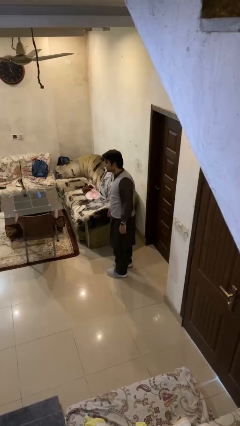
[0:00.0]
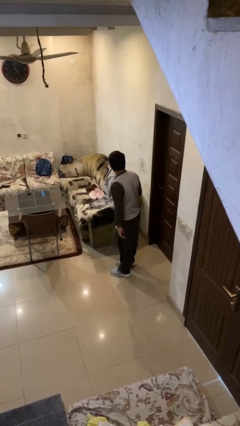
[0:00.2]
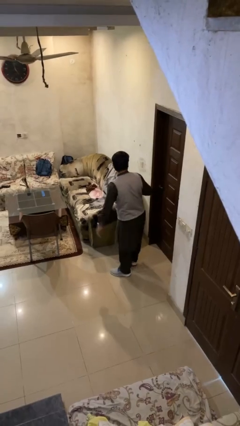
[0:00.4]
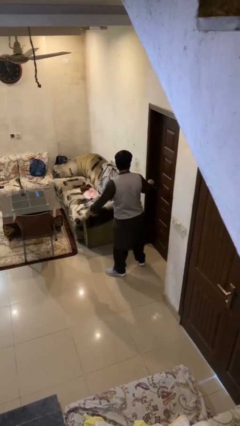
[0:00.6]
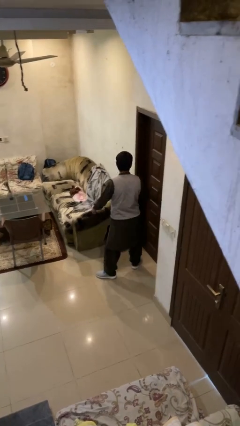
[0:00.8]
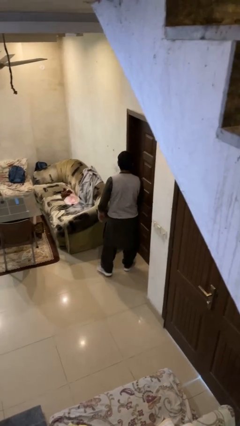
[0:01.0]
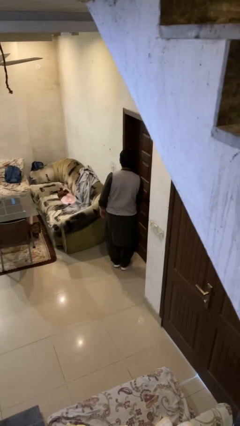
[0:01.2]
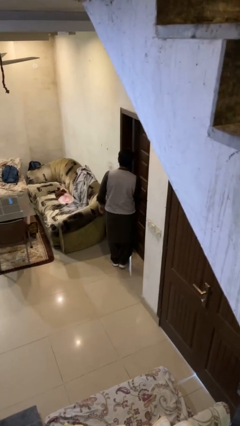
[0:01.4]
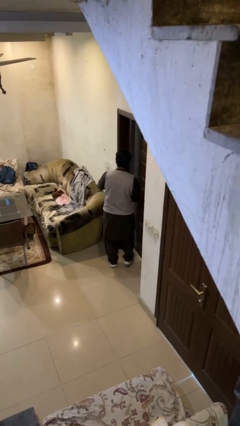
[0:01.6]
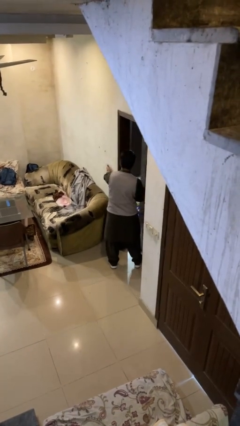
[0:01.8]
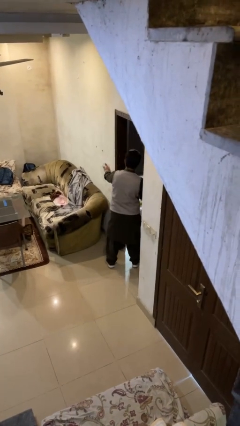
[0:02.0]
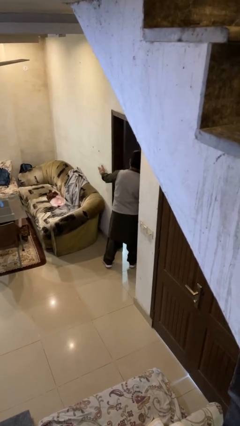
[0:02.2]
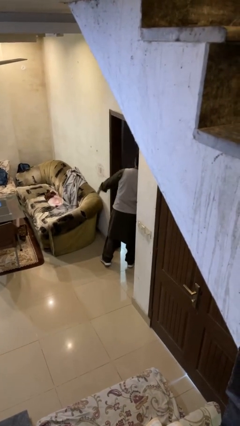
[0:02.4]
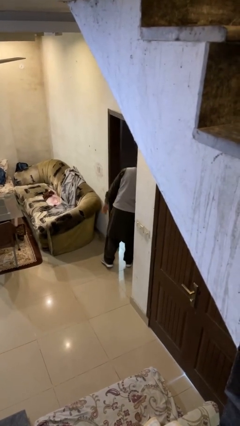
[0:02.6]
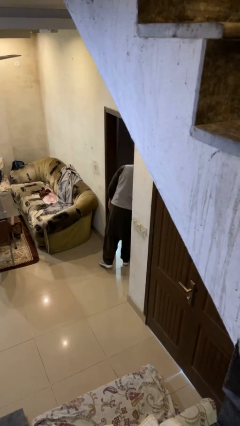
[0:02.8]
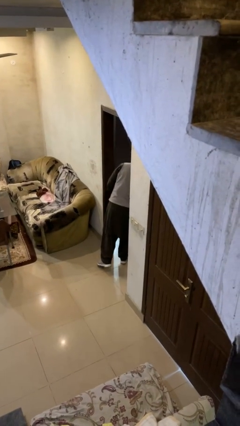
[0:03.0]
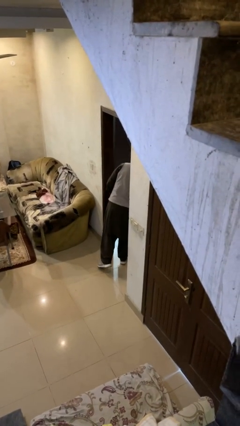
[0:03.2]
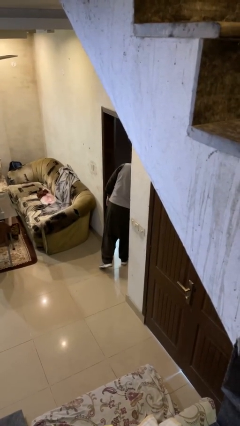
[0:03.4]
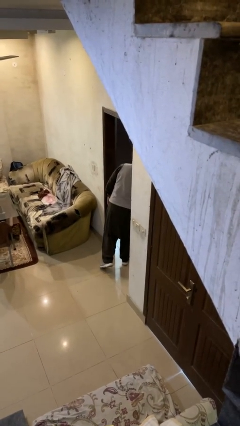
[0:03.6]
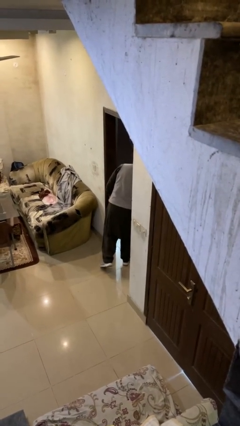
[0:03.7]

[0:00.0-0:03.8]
person opens facility door

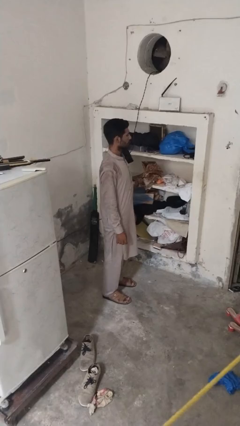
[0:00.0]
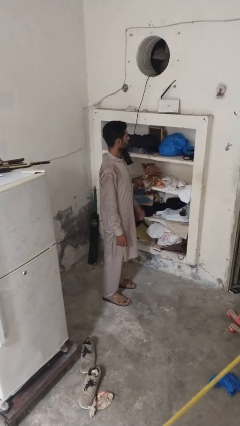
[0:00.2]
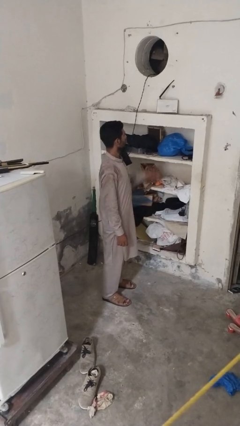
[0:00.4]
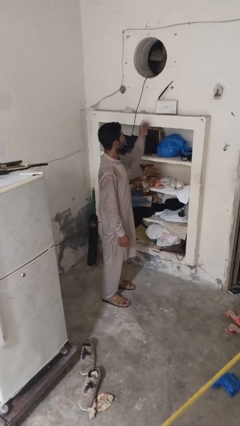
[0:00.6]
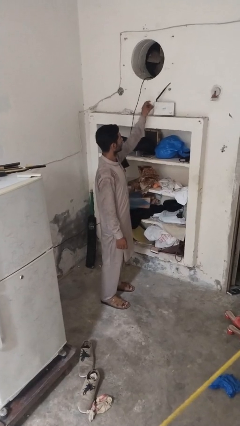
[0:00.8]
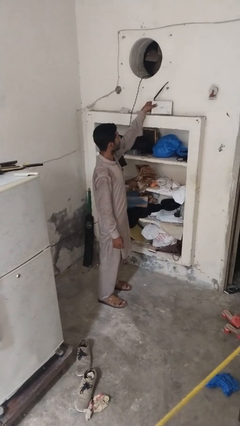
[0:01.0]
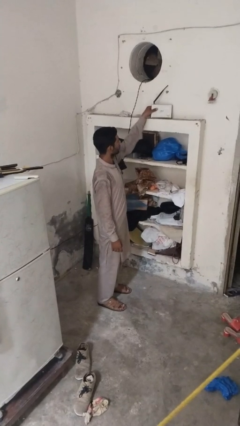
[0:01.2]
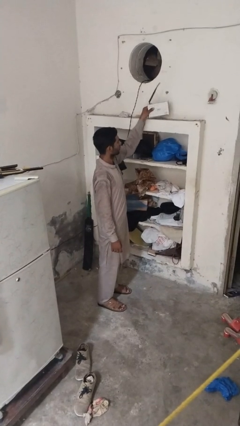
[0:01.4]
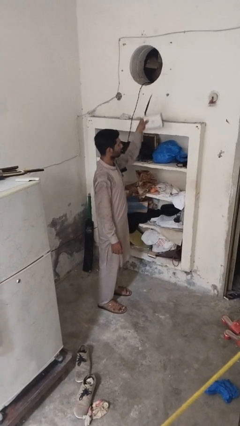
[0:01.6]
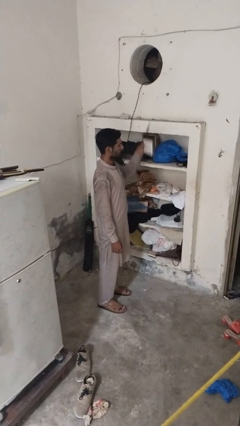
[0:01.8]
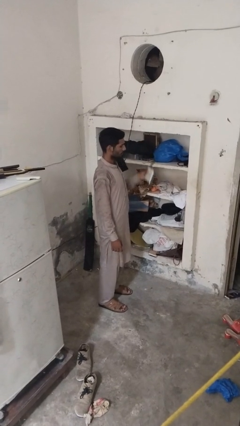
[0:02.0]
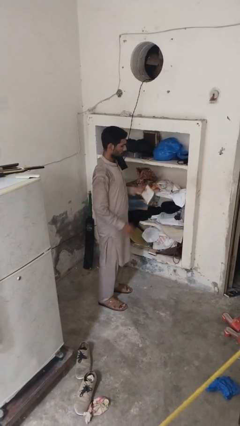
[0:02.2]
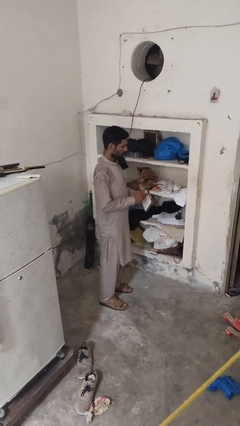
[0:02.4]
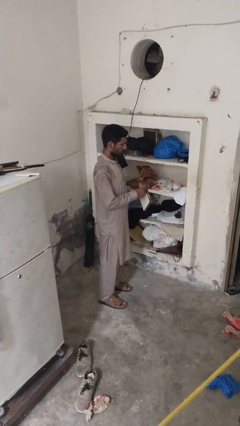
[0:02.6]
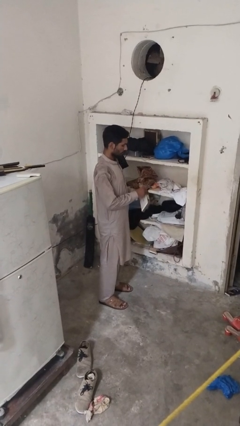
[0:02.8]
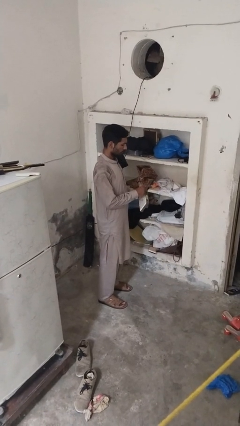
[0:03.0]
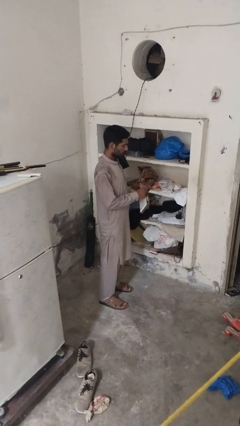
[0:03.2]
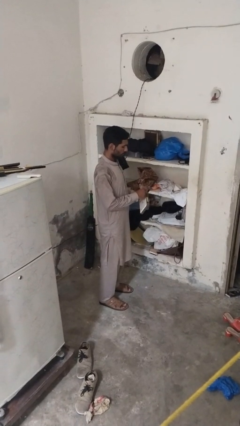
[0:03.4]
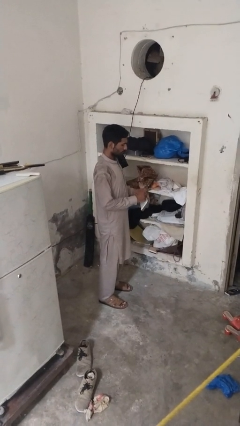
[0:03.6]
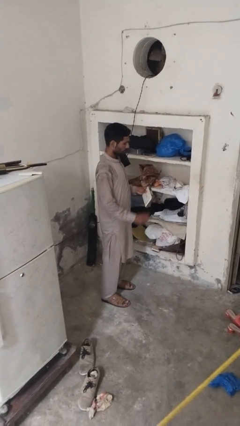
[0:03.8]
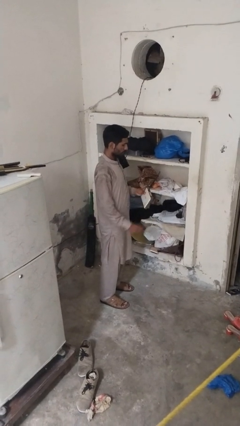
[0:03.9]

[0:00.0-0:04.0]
person picks up object from shelf

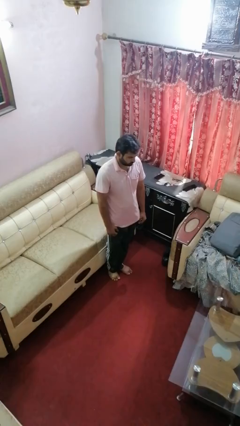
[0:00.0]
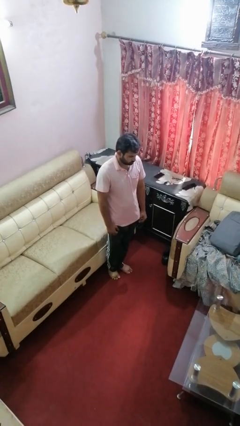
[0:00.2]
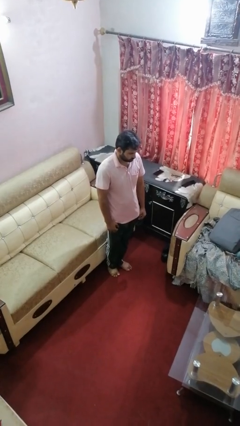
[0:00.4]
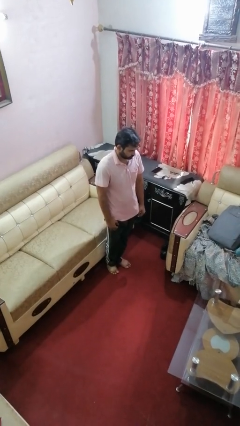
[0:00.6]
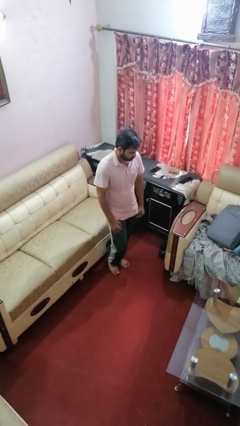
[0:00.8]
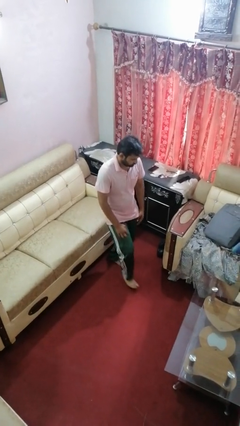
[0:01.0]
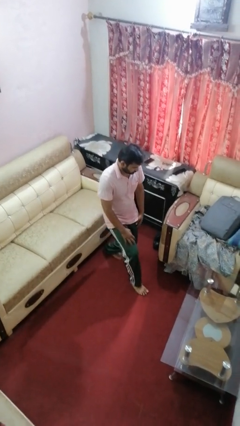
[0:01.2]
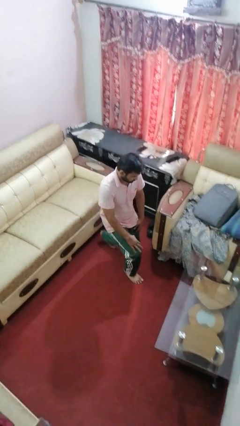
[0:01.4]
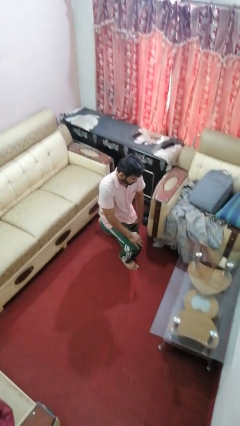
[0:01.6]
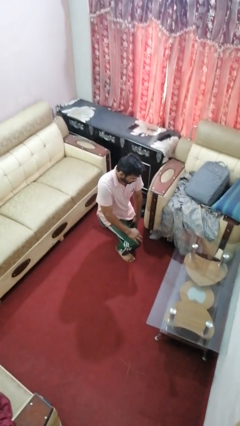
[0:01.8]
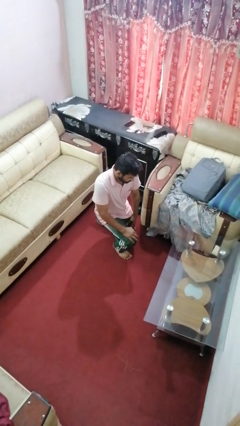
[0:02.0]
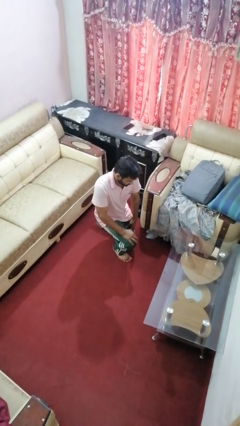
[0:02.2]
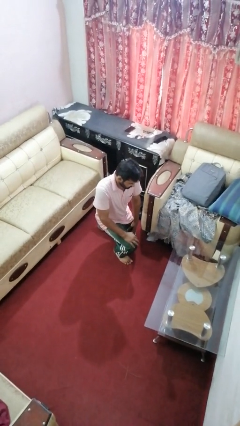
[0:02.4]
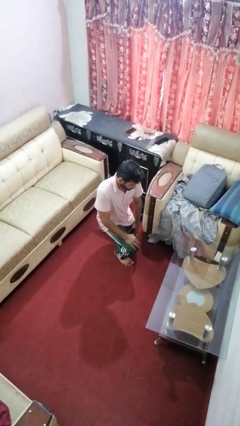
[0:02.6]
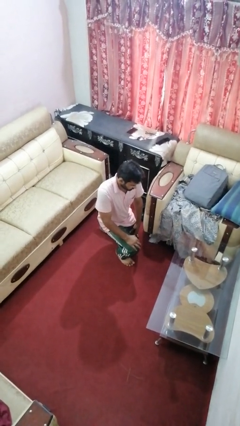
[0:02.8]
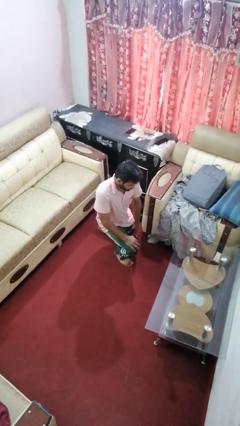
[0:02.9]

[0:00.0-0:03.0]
person kneels

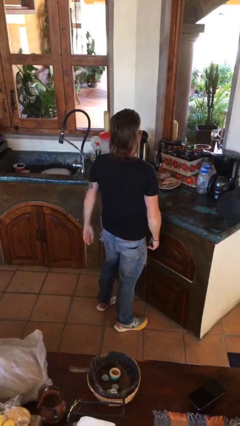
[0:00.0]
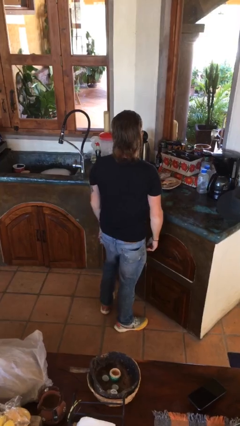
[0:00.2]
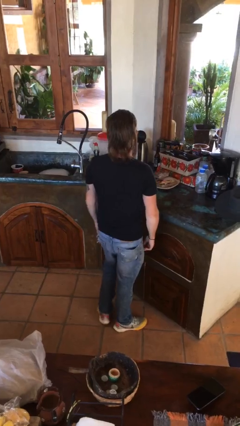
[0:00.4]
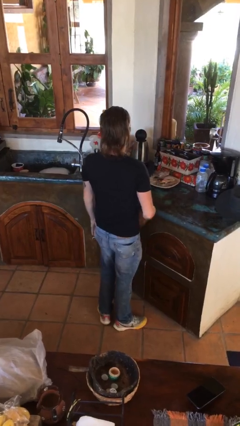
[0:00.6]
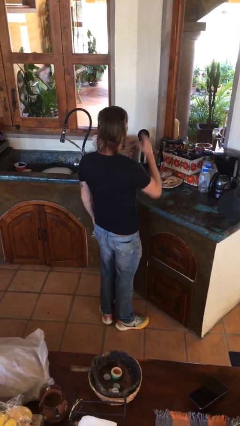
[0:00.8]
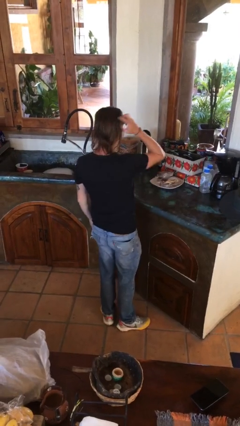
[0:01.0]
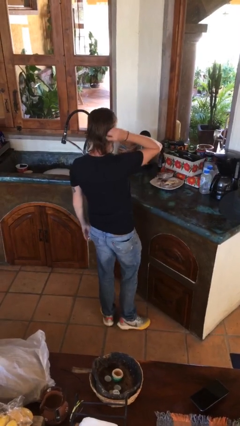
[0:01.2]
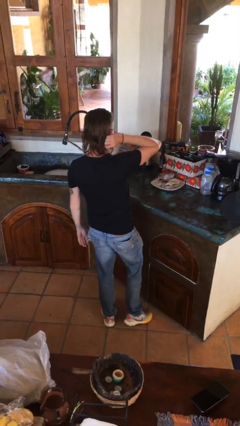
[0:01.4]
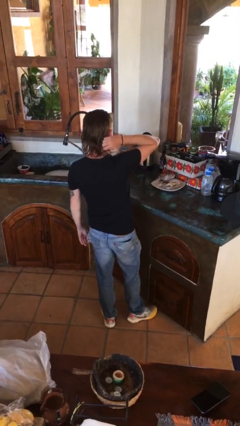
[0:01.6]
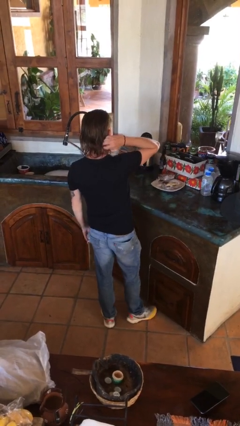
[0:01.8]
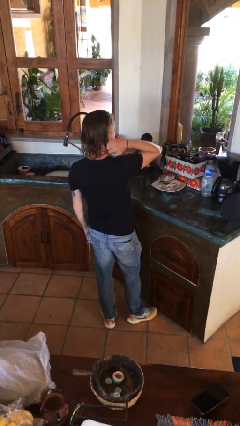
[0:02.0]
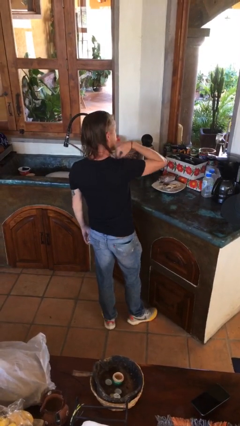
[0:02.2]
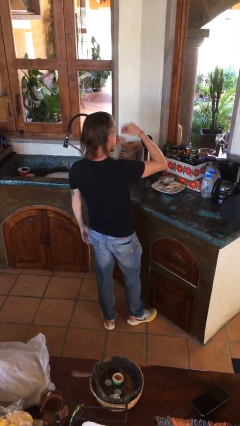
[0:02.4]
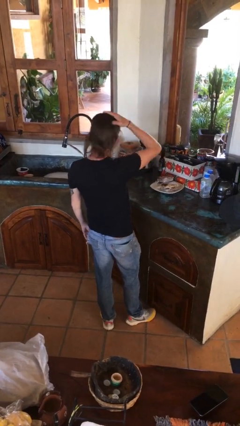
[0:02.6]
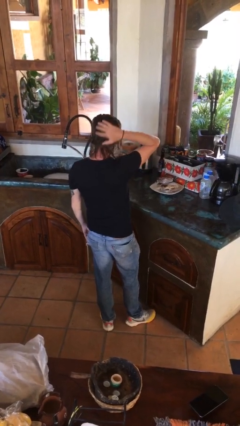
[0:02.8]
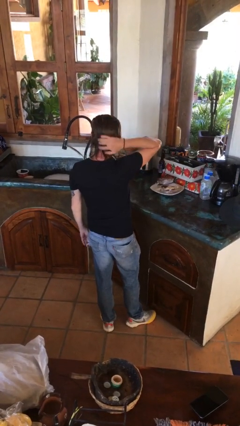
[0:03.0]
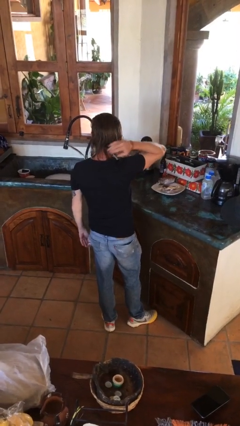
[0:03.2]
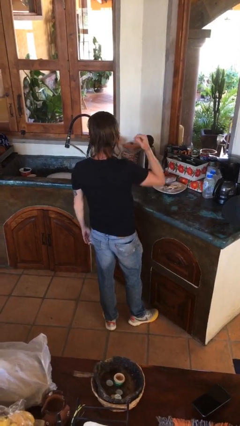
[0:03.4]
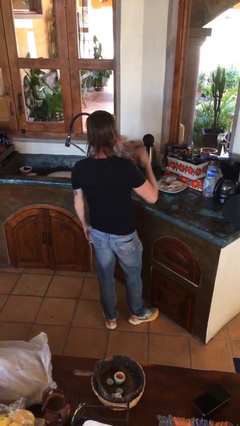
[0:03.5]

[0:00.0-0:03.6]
person strokes hair

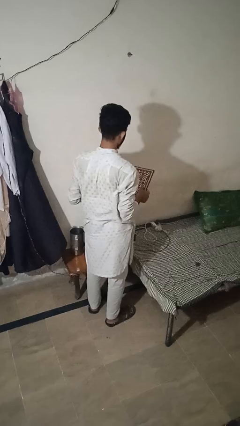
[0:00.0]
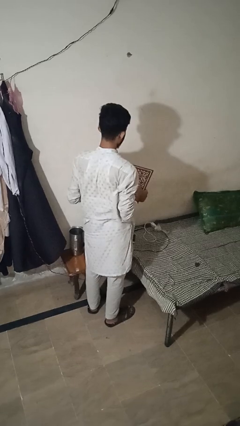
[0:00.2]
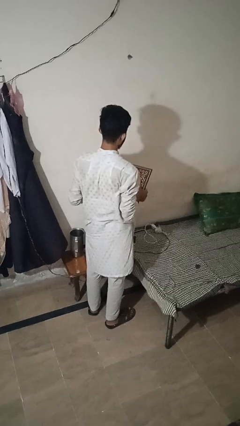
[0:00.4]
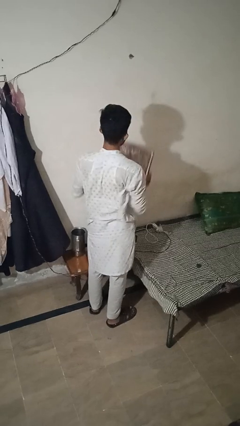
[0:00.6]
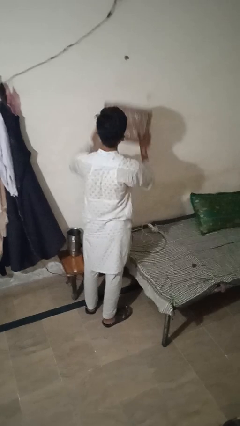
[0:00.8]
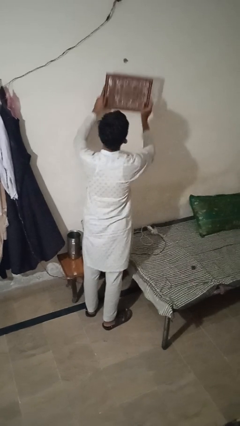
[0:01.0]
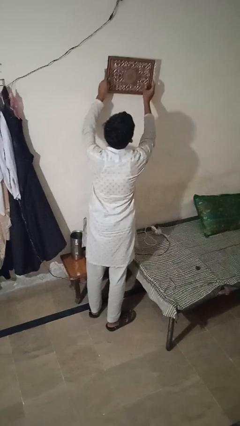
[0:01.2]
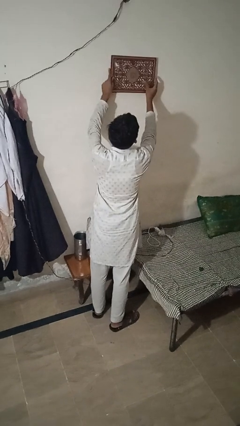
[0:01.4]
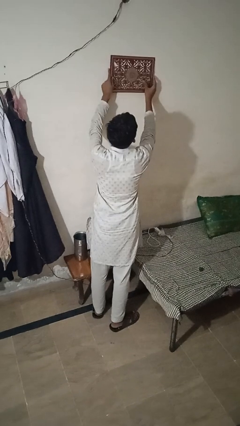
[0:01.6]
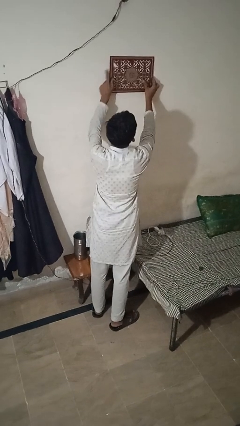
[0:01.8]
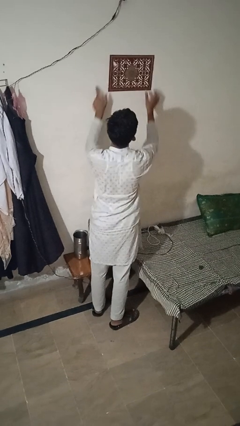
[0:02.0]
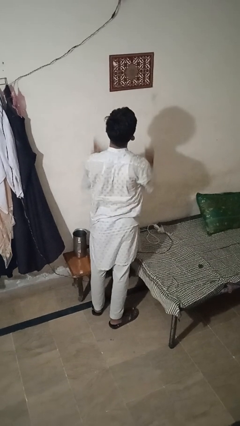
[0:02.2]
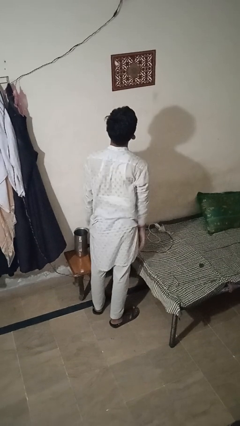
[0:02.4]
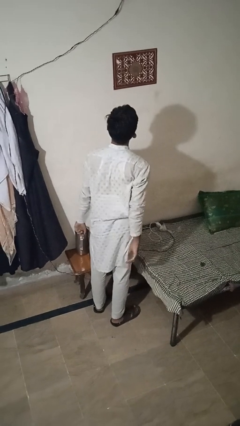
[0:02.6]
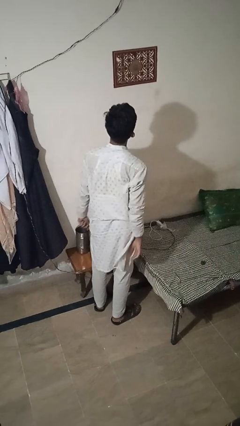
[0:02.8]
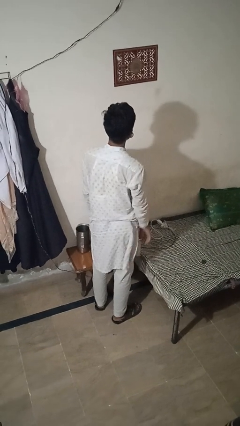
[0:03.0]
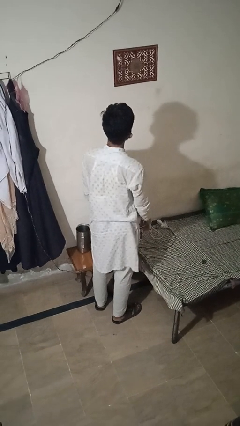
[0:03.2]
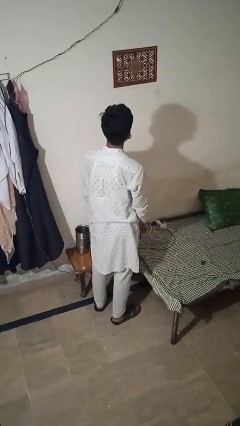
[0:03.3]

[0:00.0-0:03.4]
person puts up picture frame
